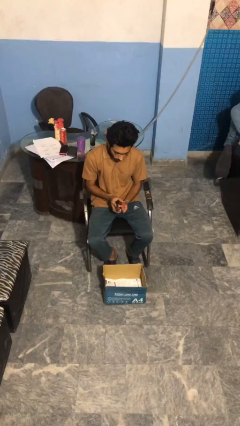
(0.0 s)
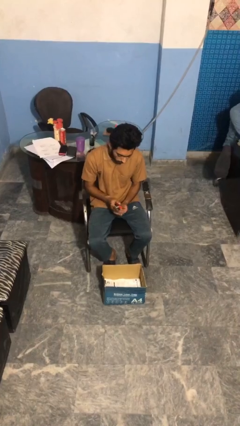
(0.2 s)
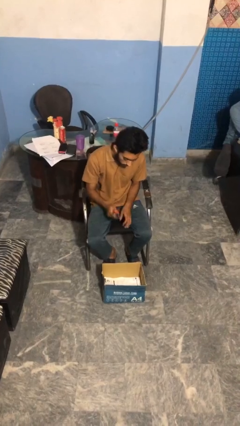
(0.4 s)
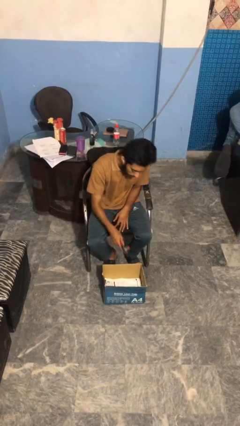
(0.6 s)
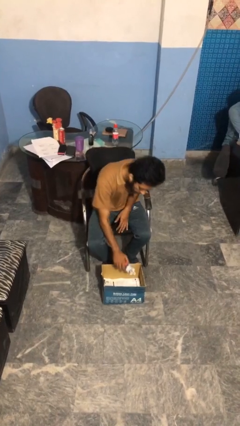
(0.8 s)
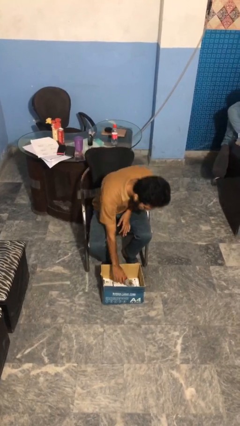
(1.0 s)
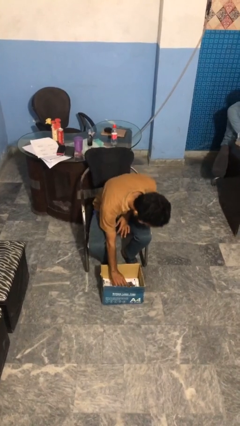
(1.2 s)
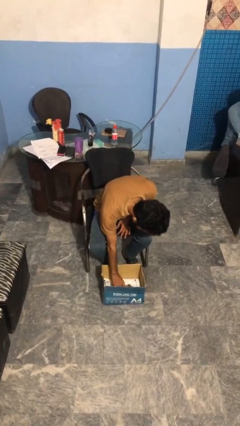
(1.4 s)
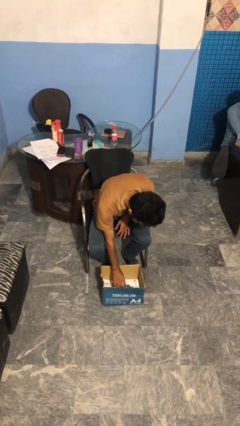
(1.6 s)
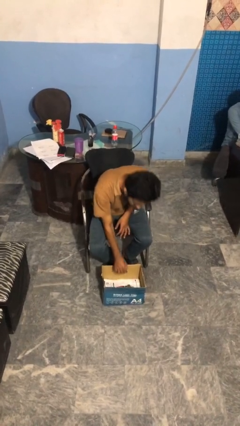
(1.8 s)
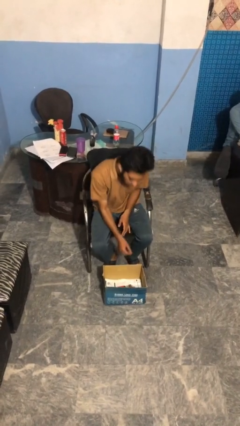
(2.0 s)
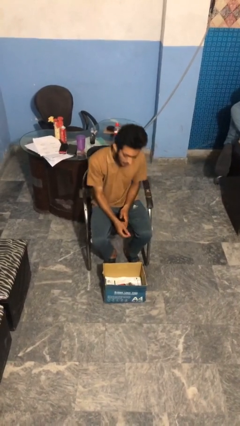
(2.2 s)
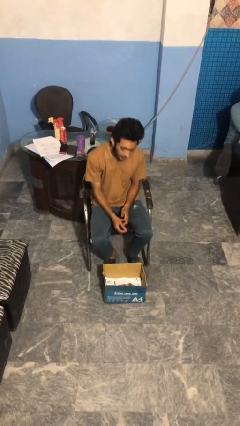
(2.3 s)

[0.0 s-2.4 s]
person puts object into box

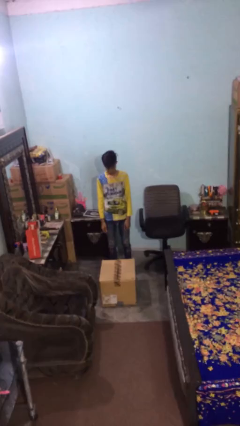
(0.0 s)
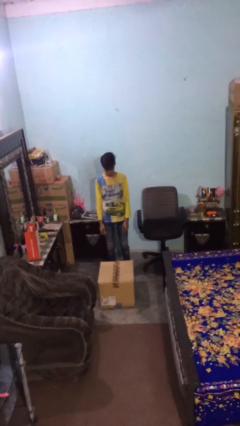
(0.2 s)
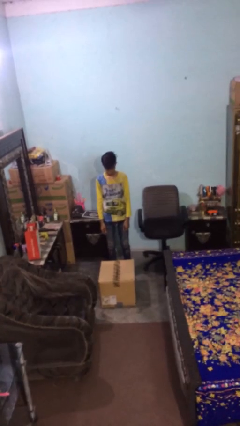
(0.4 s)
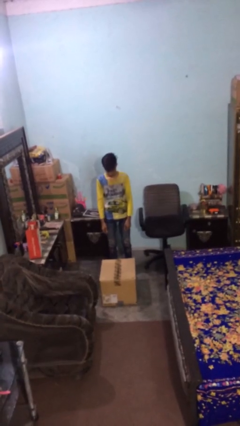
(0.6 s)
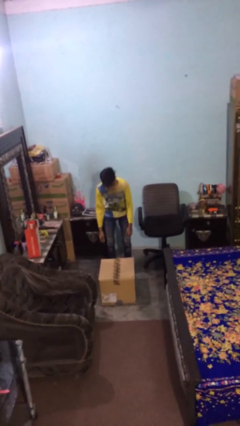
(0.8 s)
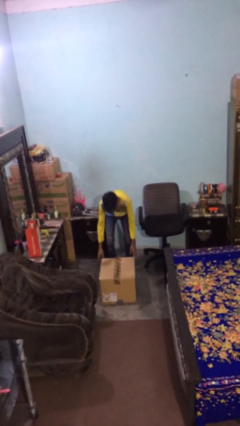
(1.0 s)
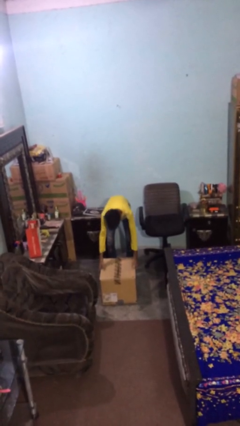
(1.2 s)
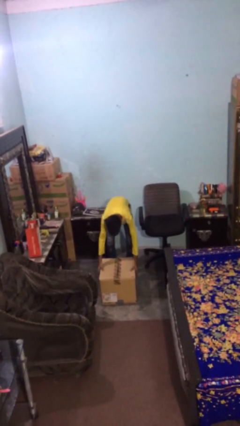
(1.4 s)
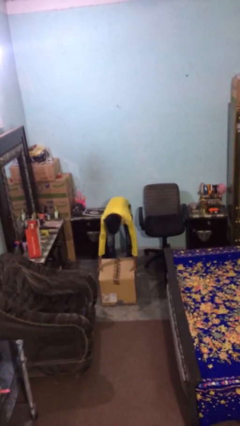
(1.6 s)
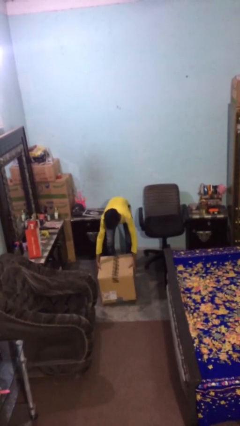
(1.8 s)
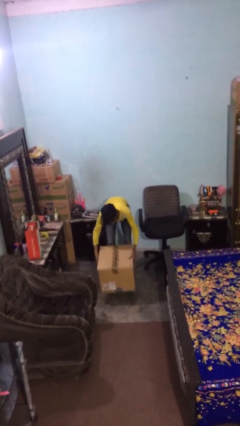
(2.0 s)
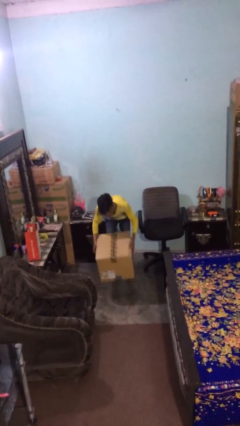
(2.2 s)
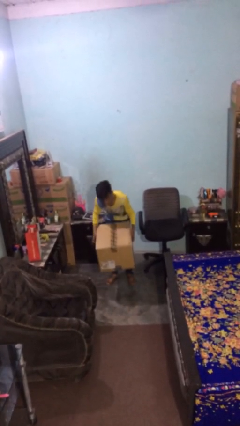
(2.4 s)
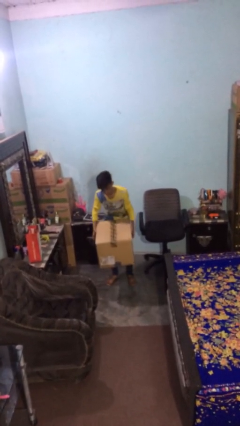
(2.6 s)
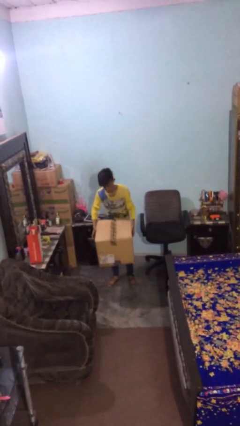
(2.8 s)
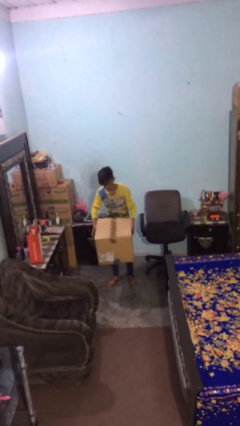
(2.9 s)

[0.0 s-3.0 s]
person picks up object from floor

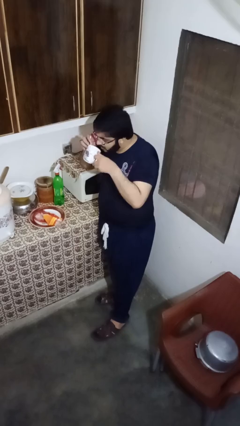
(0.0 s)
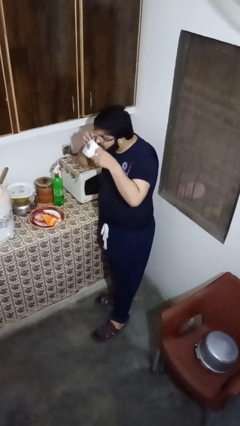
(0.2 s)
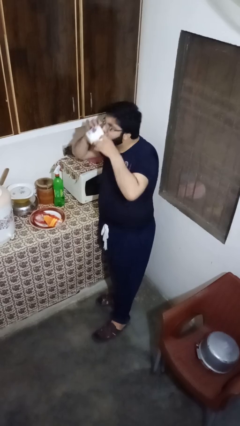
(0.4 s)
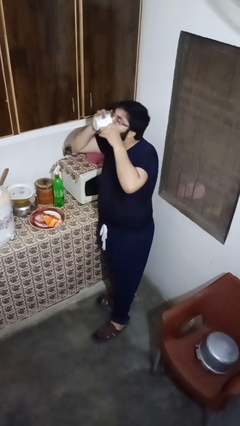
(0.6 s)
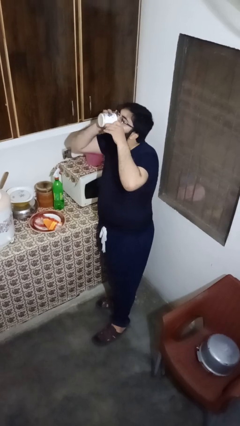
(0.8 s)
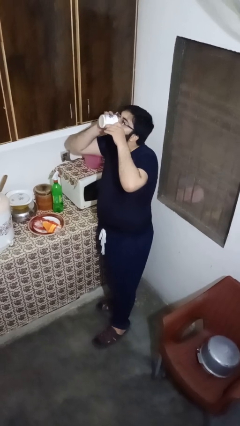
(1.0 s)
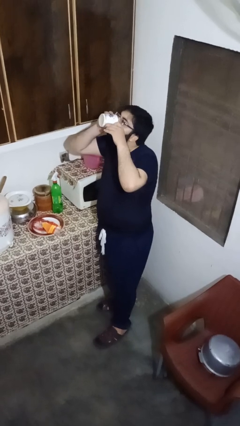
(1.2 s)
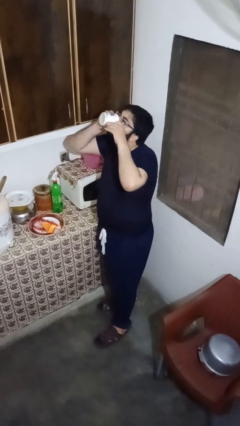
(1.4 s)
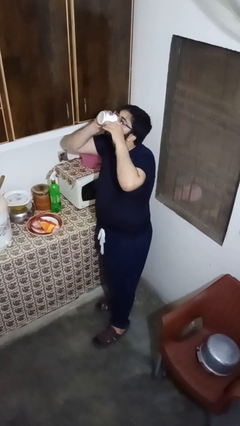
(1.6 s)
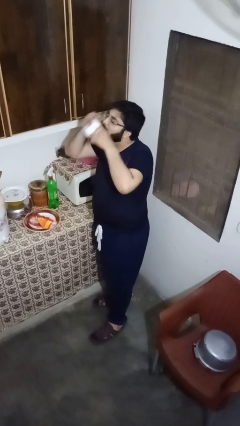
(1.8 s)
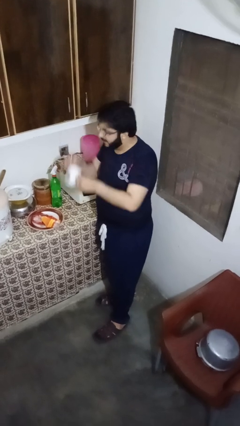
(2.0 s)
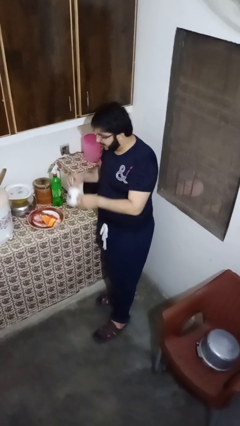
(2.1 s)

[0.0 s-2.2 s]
person drinks from mug

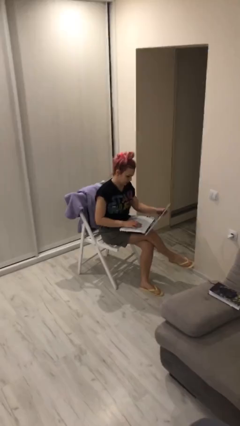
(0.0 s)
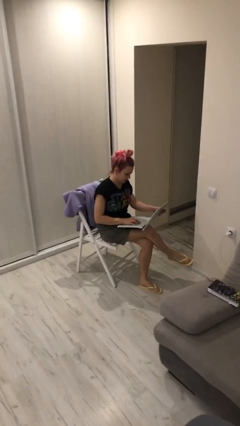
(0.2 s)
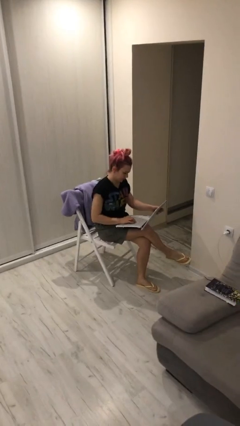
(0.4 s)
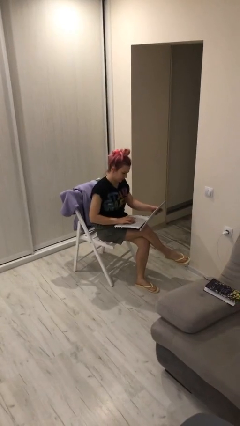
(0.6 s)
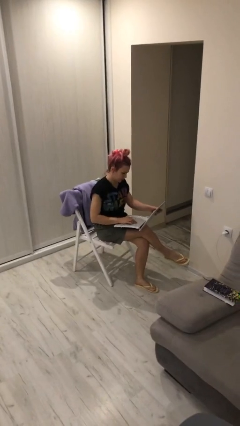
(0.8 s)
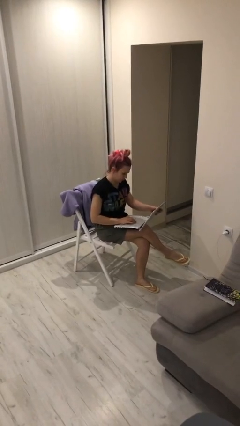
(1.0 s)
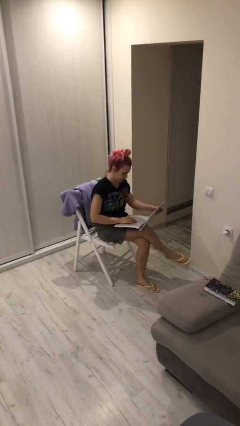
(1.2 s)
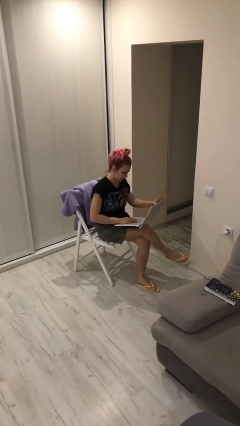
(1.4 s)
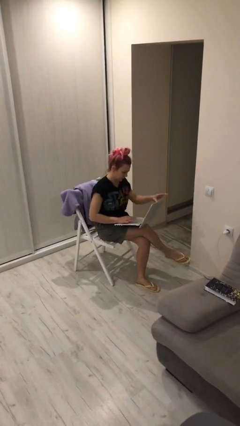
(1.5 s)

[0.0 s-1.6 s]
person interacts with laptop

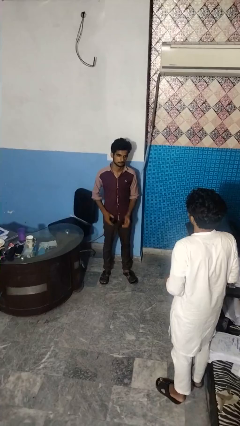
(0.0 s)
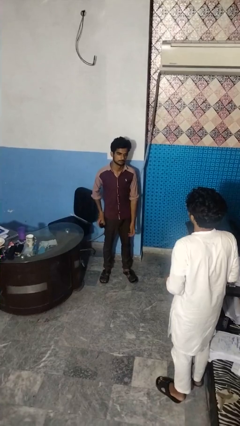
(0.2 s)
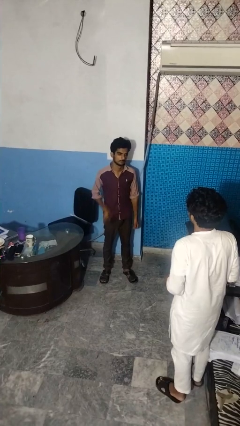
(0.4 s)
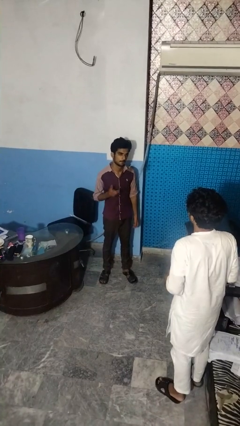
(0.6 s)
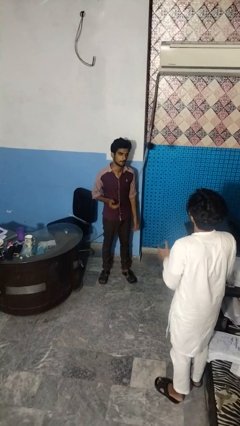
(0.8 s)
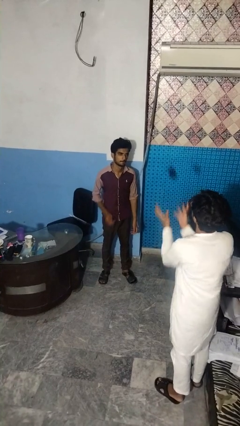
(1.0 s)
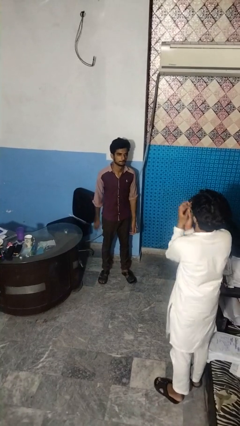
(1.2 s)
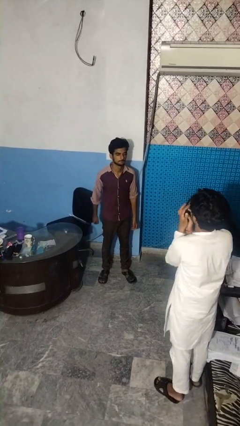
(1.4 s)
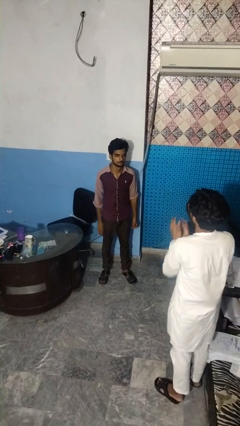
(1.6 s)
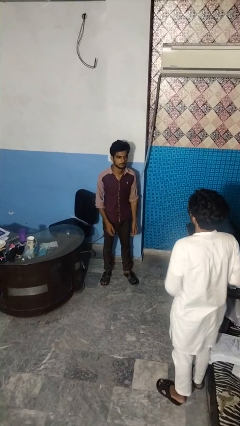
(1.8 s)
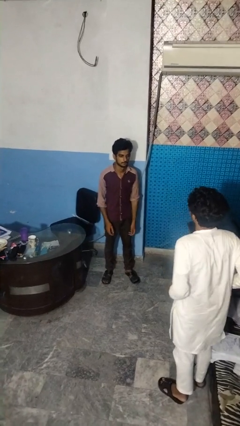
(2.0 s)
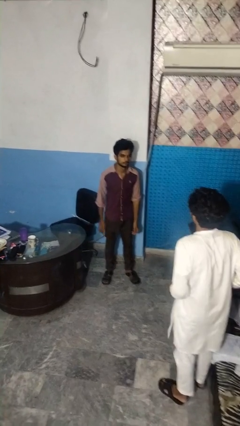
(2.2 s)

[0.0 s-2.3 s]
person throws object to person

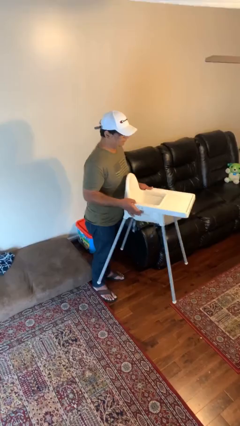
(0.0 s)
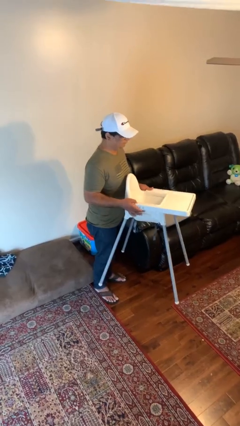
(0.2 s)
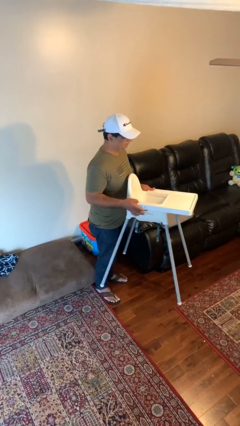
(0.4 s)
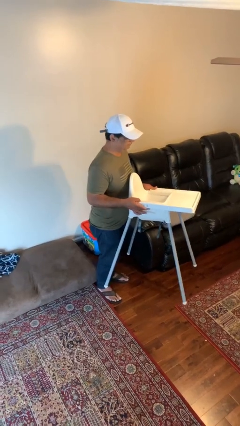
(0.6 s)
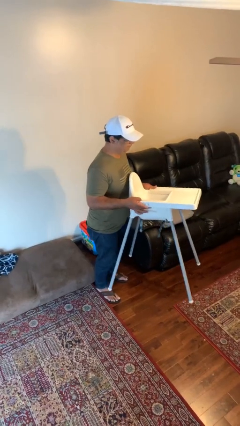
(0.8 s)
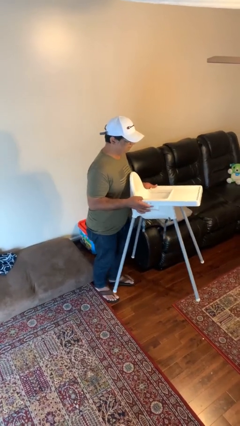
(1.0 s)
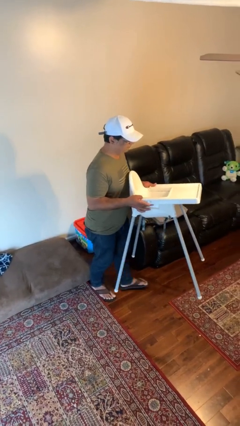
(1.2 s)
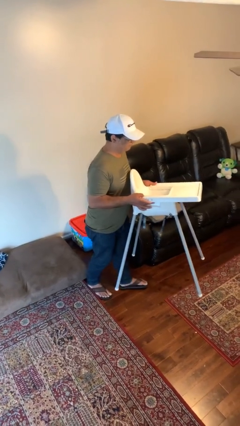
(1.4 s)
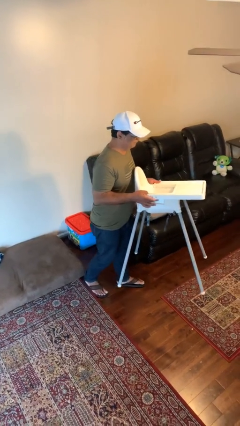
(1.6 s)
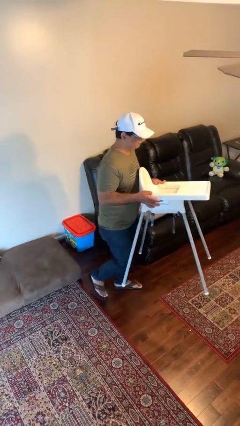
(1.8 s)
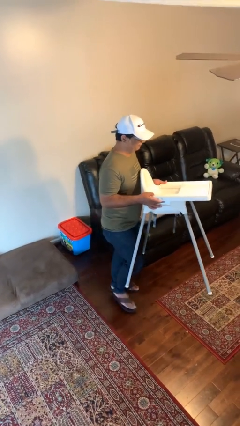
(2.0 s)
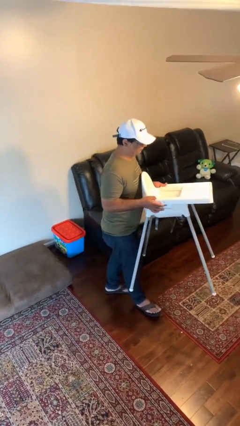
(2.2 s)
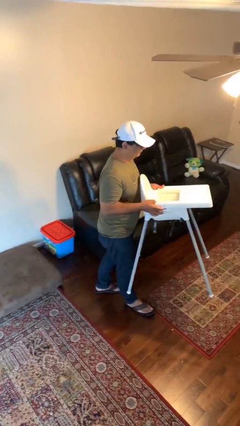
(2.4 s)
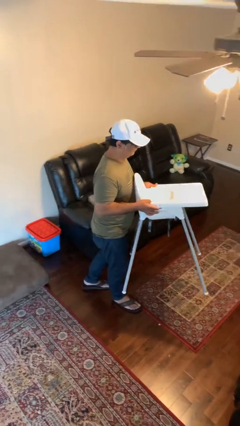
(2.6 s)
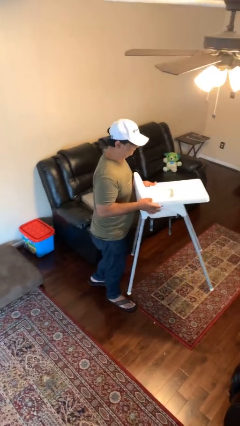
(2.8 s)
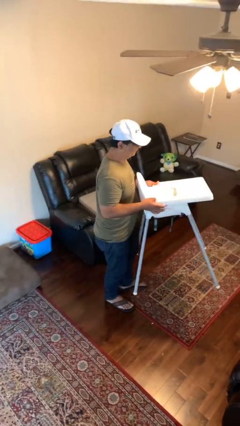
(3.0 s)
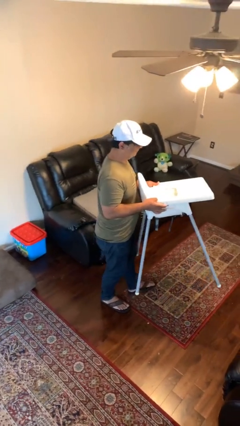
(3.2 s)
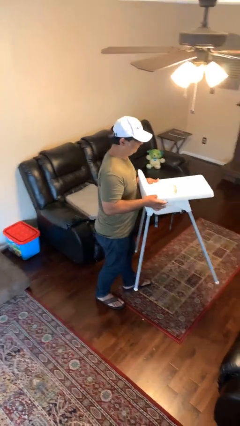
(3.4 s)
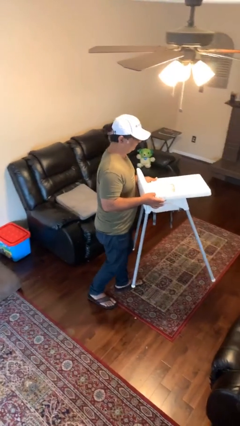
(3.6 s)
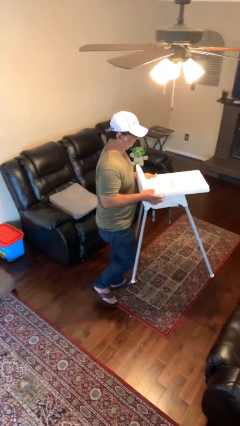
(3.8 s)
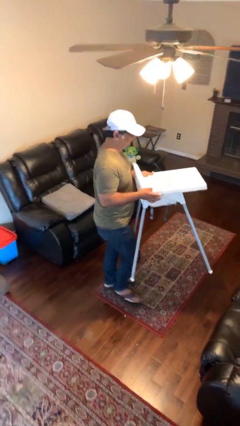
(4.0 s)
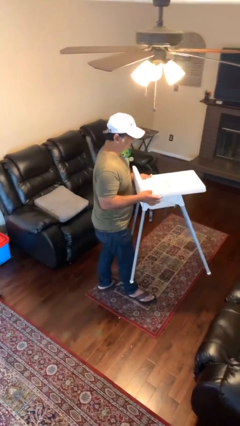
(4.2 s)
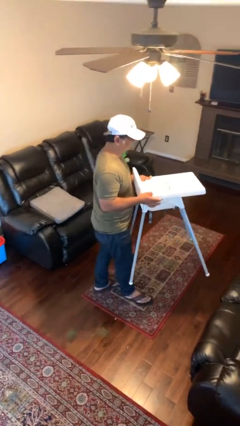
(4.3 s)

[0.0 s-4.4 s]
person carries heavy object

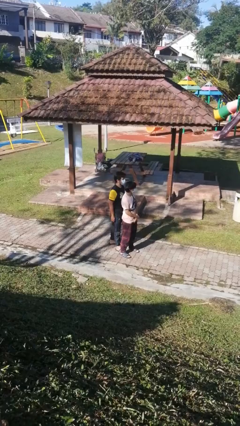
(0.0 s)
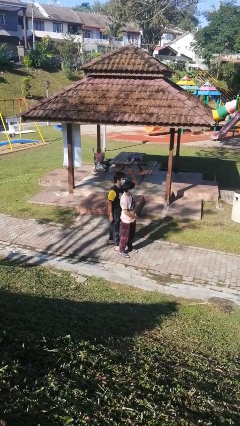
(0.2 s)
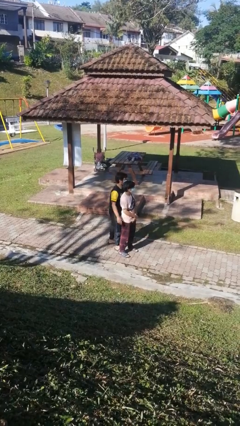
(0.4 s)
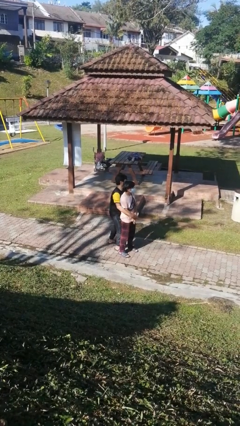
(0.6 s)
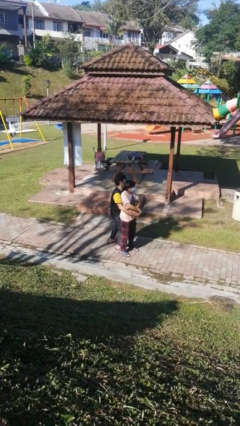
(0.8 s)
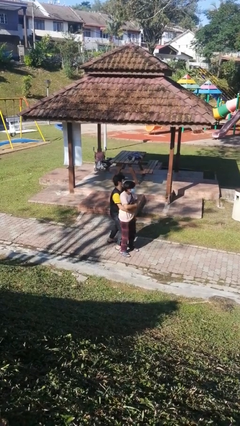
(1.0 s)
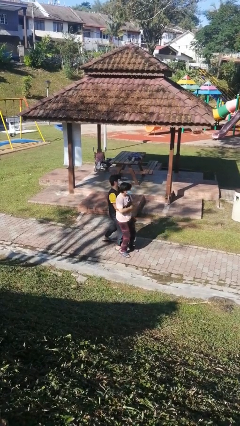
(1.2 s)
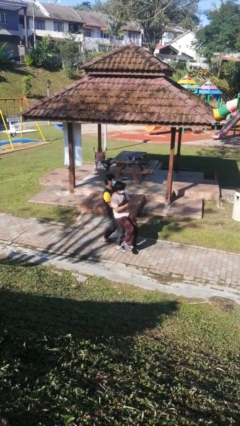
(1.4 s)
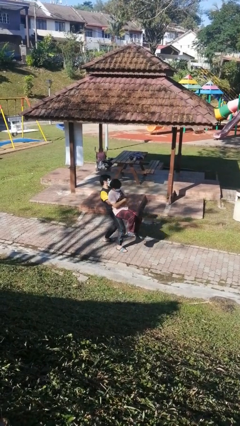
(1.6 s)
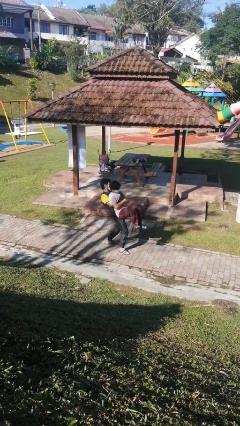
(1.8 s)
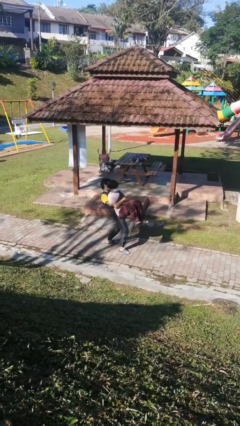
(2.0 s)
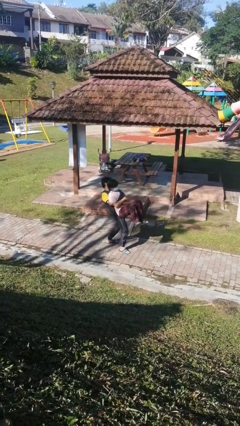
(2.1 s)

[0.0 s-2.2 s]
person picks up person
